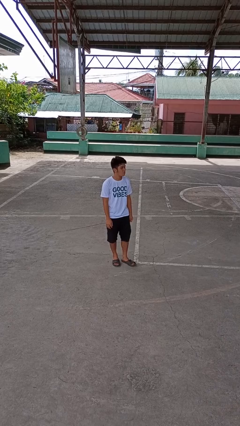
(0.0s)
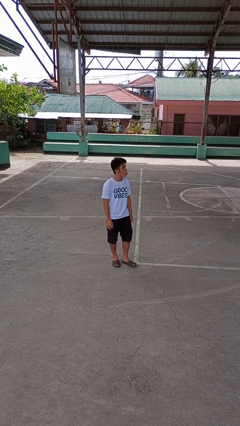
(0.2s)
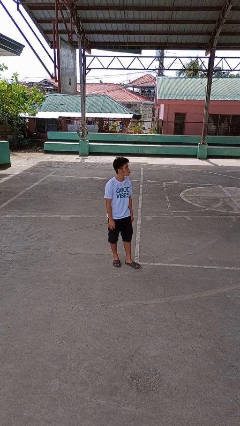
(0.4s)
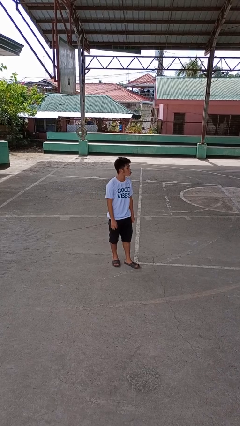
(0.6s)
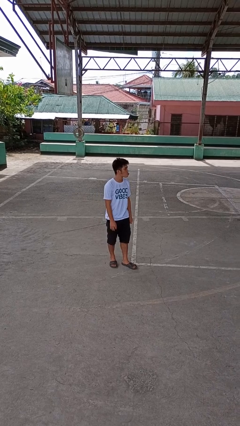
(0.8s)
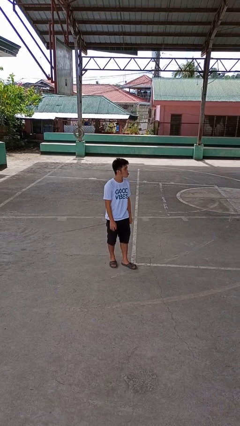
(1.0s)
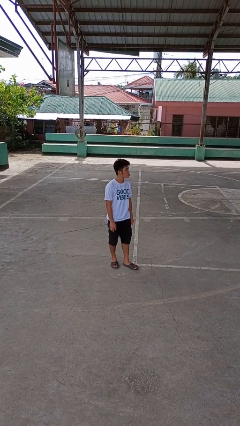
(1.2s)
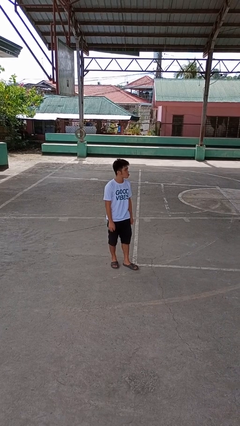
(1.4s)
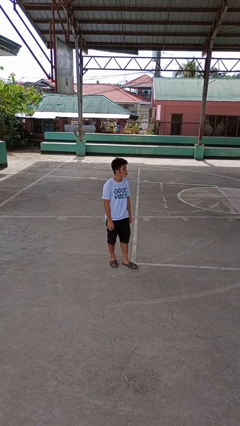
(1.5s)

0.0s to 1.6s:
person sticks out tongue

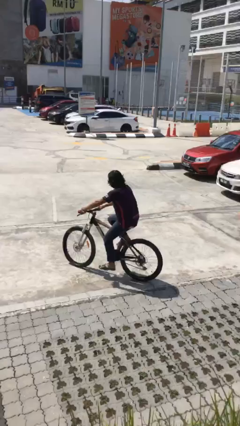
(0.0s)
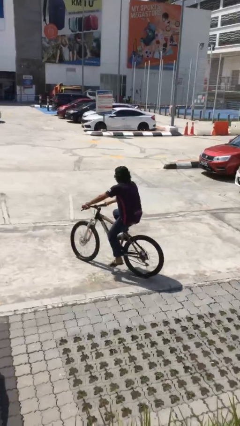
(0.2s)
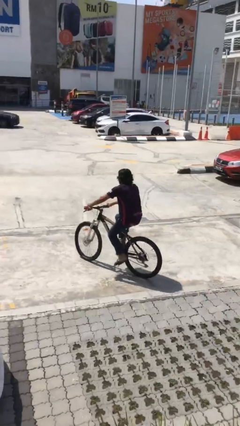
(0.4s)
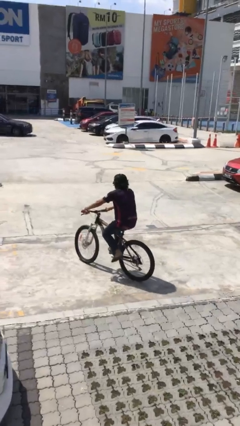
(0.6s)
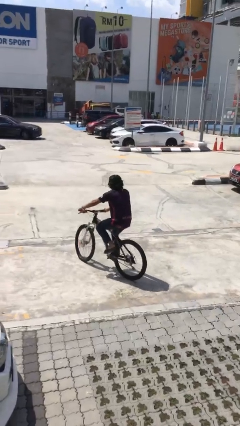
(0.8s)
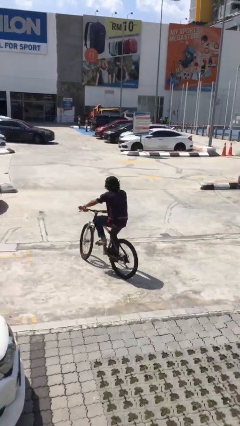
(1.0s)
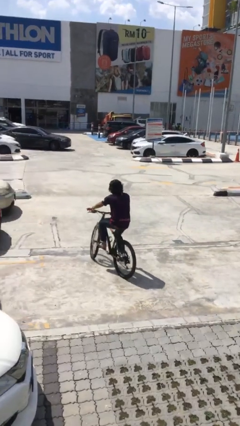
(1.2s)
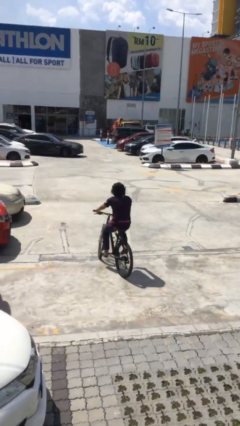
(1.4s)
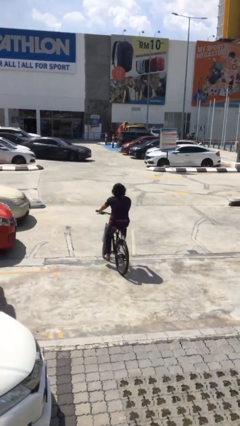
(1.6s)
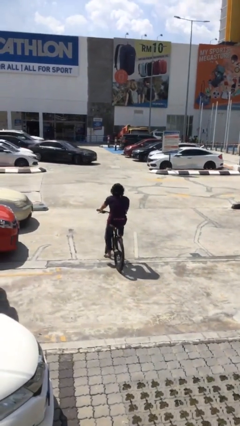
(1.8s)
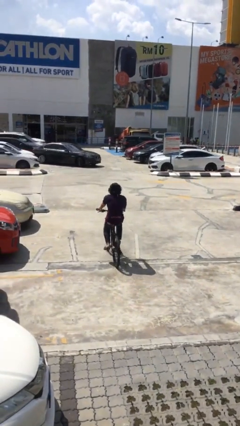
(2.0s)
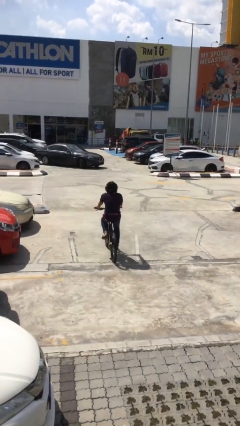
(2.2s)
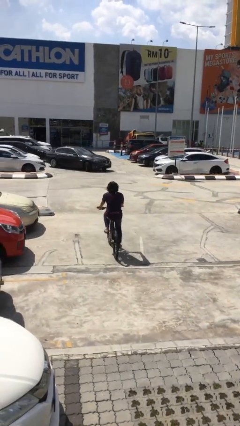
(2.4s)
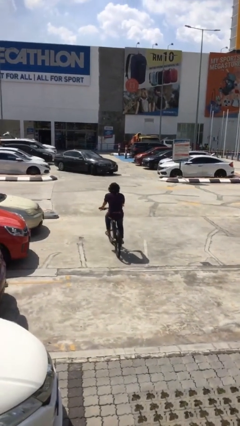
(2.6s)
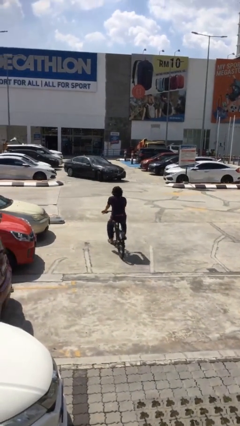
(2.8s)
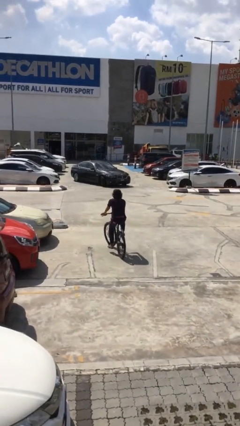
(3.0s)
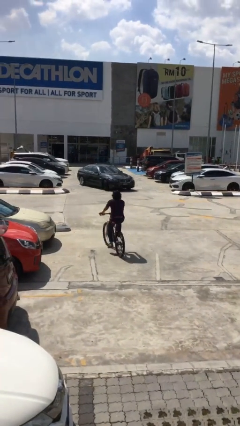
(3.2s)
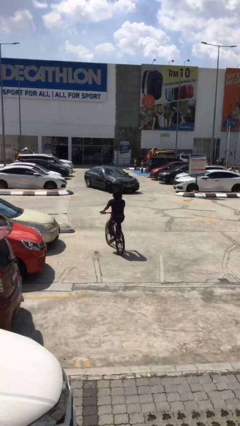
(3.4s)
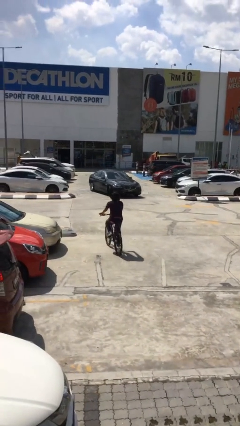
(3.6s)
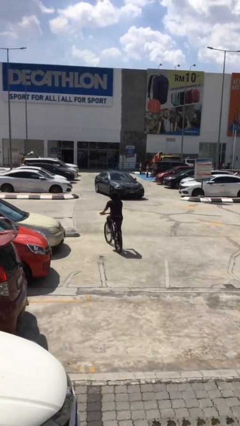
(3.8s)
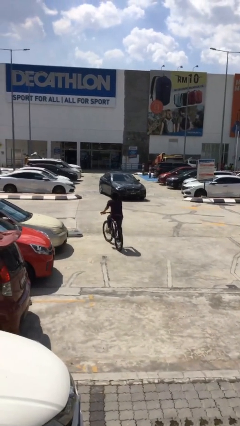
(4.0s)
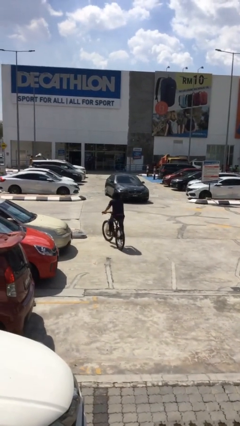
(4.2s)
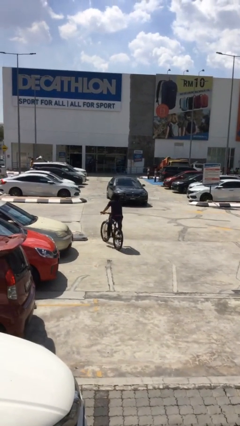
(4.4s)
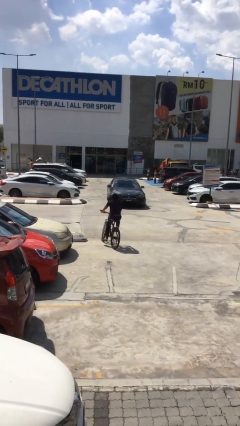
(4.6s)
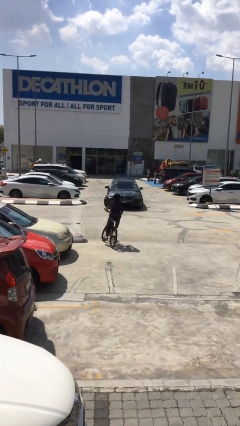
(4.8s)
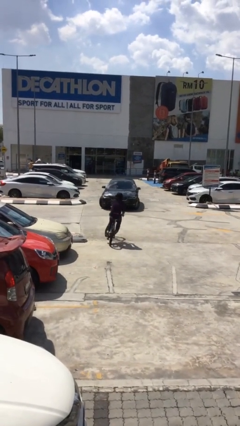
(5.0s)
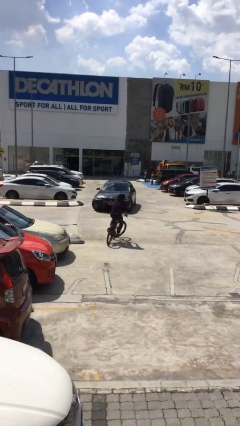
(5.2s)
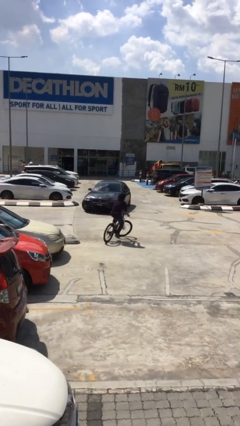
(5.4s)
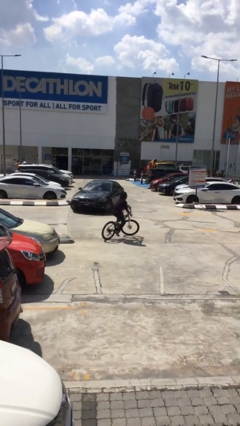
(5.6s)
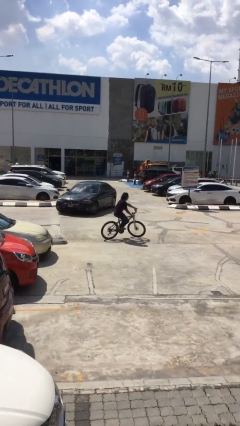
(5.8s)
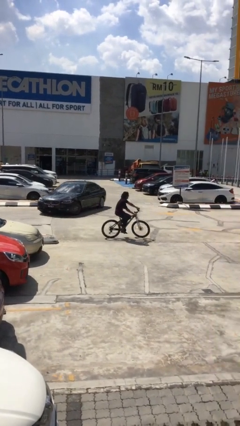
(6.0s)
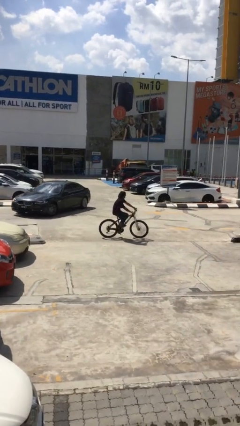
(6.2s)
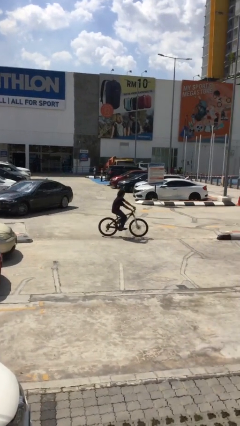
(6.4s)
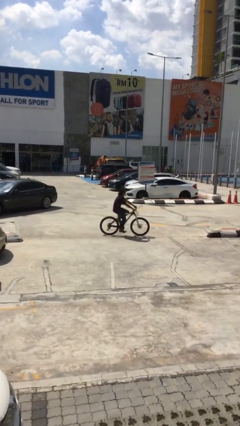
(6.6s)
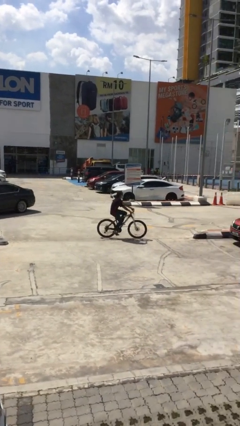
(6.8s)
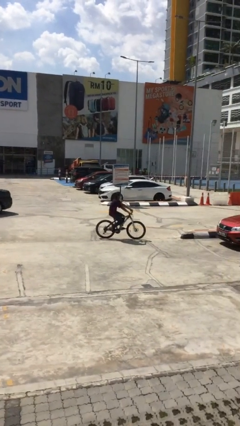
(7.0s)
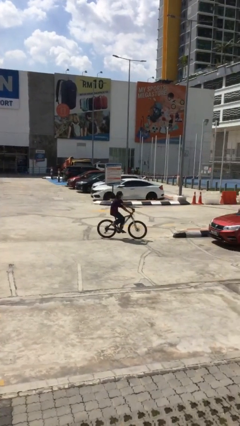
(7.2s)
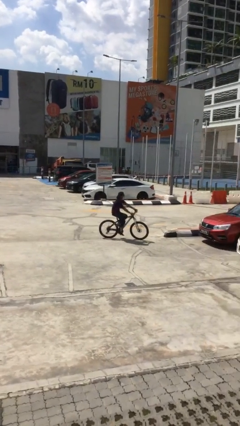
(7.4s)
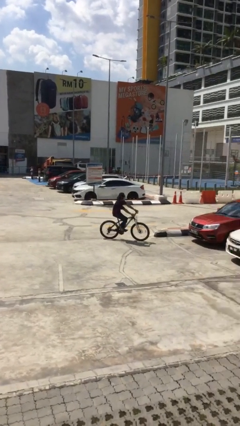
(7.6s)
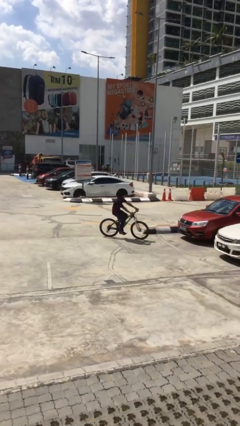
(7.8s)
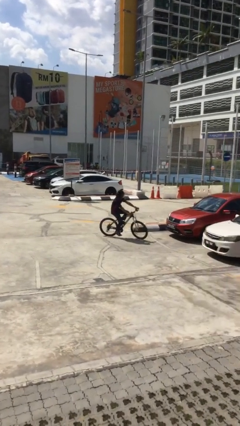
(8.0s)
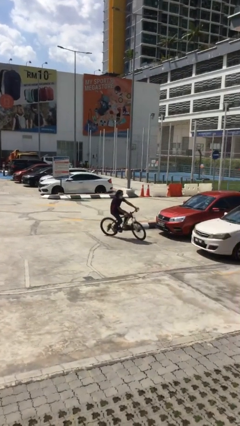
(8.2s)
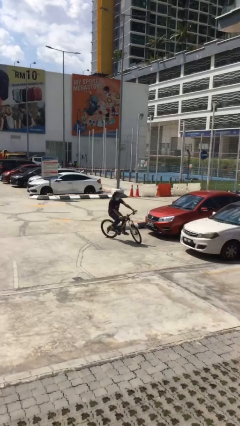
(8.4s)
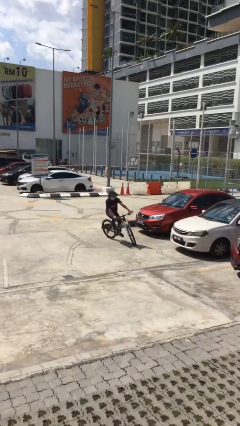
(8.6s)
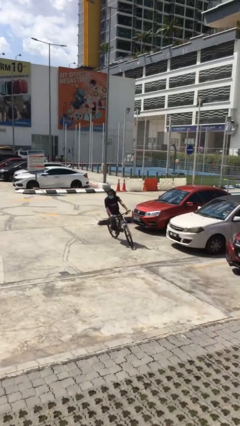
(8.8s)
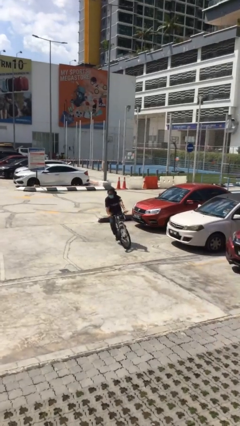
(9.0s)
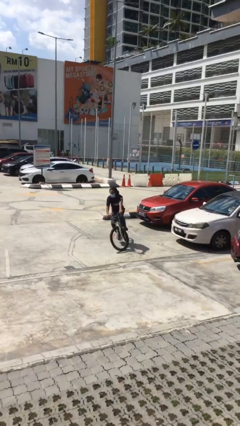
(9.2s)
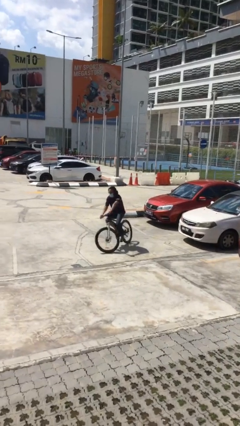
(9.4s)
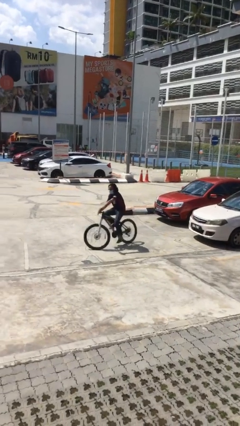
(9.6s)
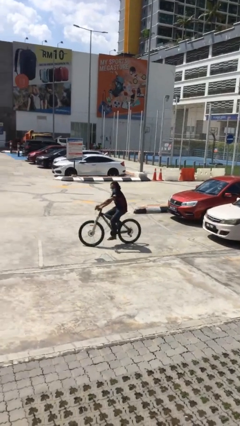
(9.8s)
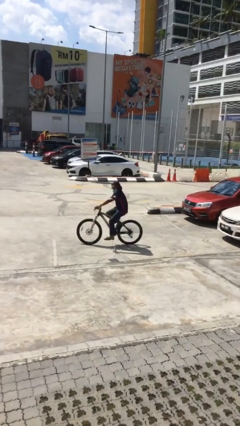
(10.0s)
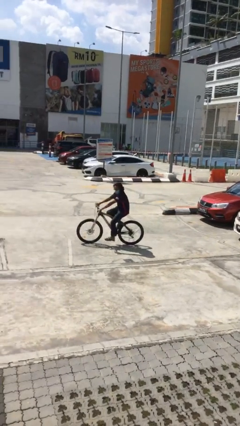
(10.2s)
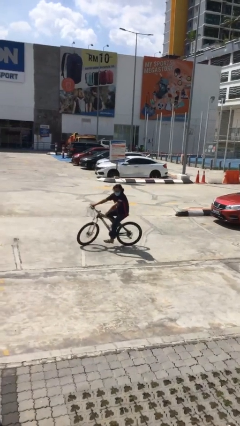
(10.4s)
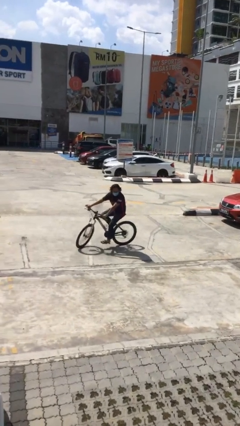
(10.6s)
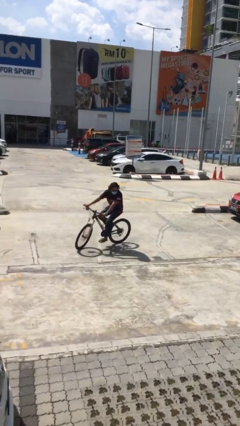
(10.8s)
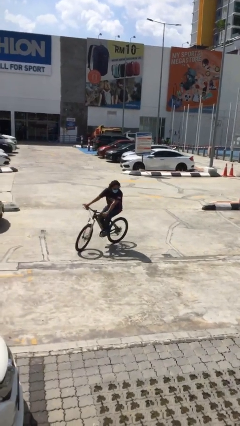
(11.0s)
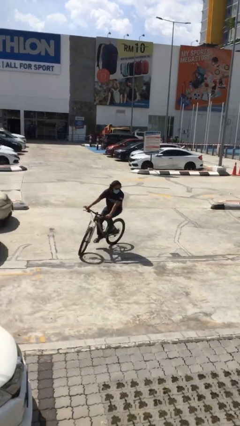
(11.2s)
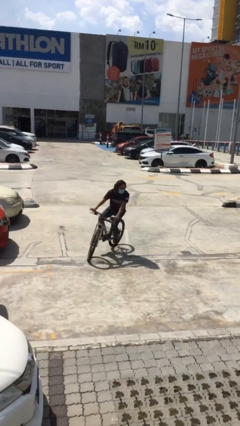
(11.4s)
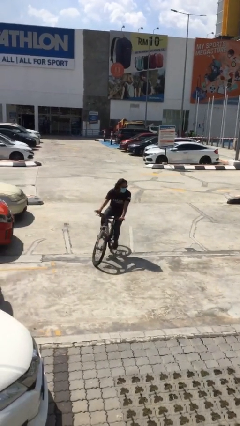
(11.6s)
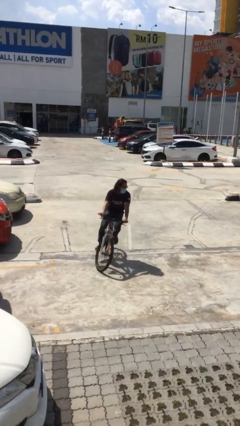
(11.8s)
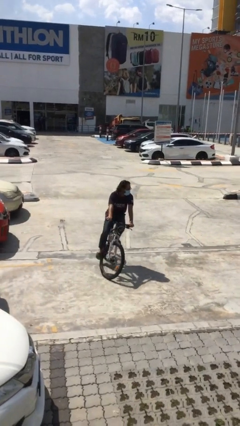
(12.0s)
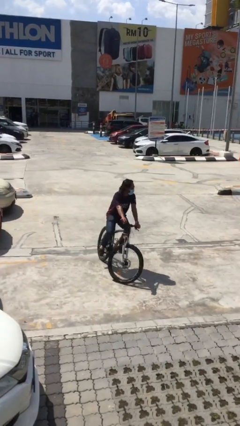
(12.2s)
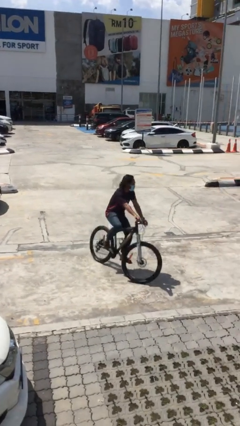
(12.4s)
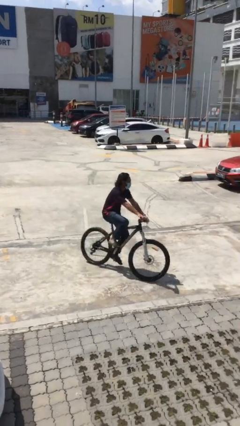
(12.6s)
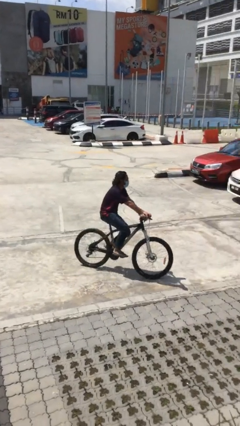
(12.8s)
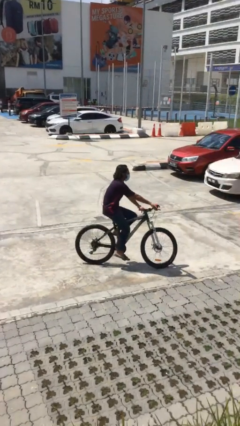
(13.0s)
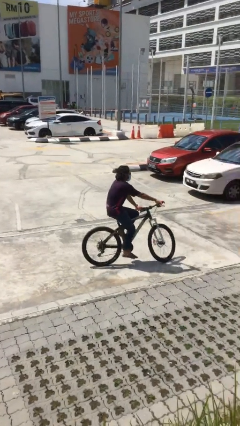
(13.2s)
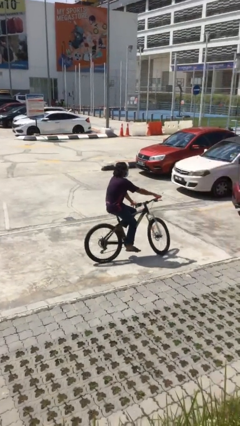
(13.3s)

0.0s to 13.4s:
person rides bicycle

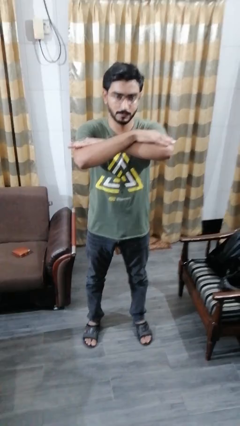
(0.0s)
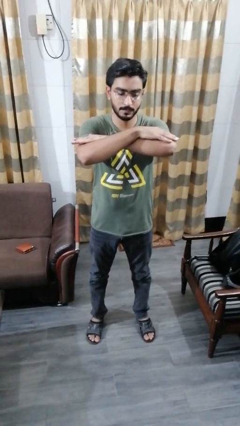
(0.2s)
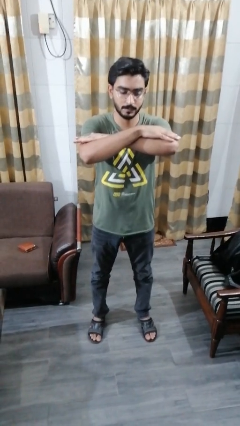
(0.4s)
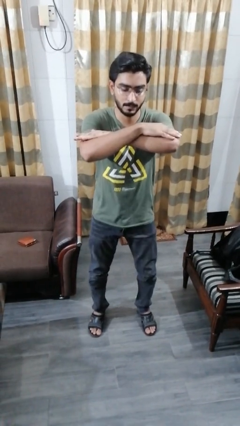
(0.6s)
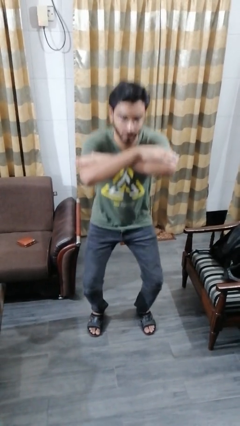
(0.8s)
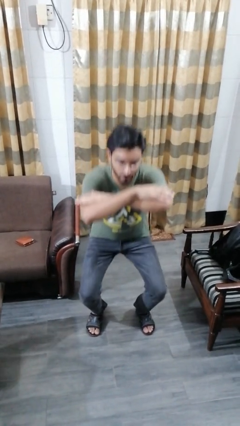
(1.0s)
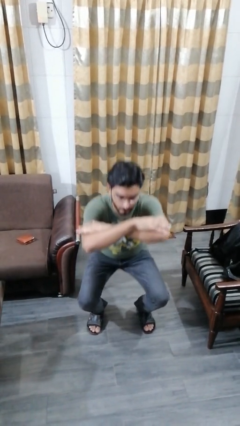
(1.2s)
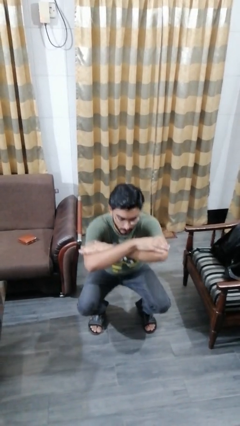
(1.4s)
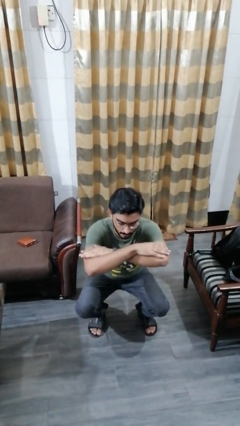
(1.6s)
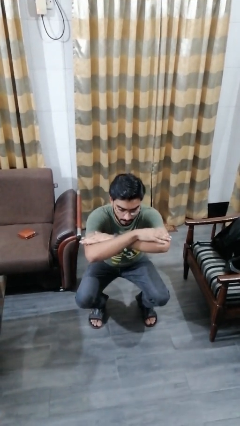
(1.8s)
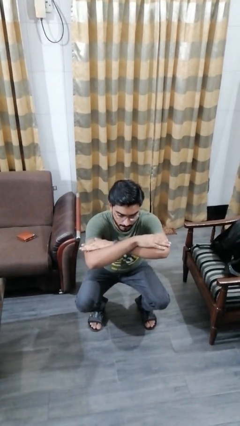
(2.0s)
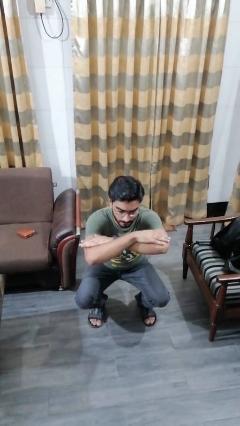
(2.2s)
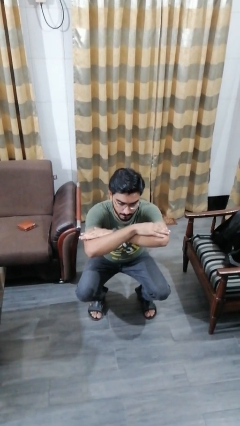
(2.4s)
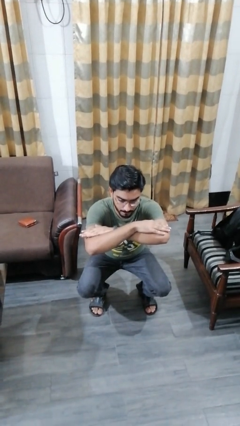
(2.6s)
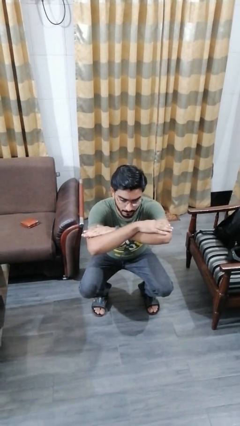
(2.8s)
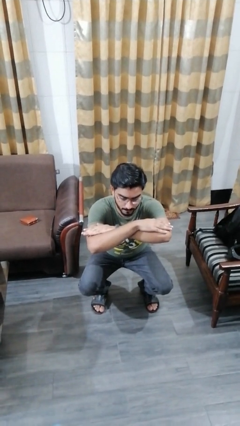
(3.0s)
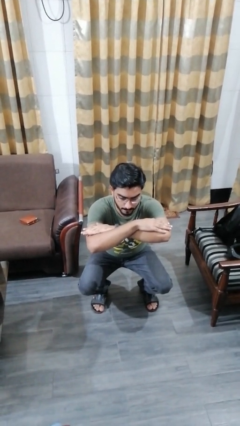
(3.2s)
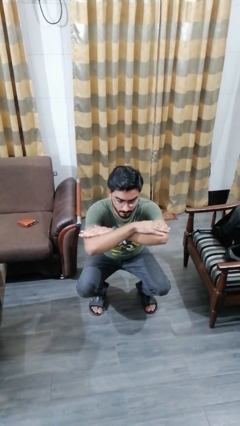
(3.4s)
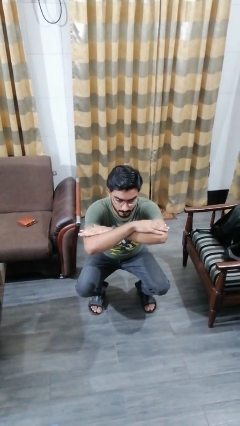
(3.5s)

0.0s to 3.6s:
person squats
